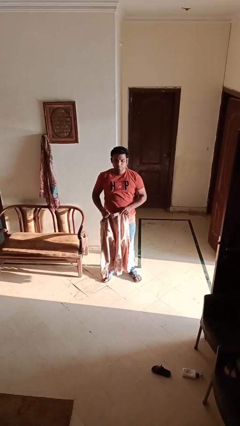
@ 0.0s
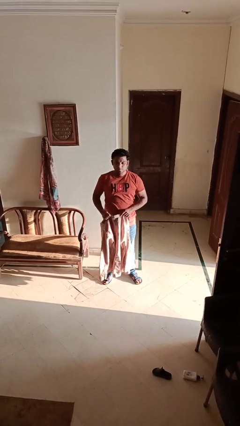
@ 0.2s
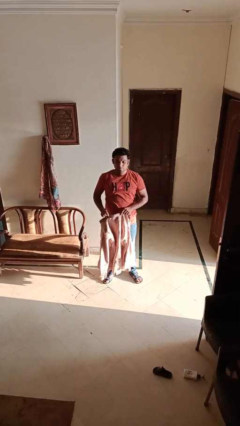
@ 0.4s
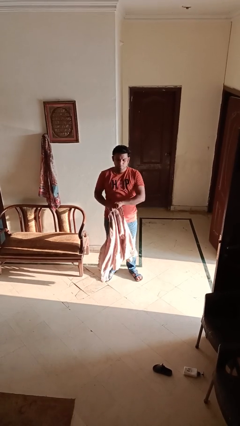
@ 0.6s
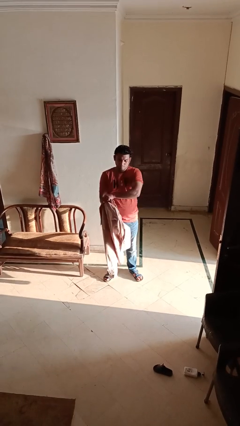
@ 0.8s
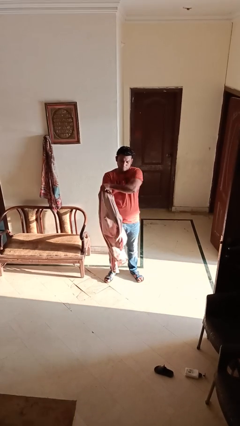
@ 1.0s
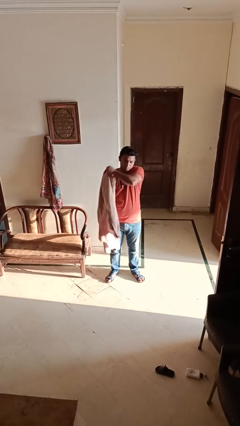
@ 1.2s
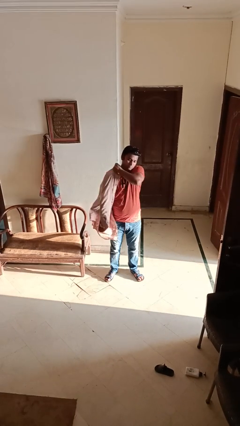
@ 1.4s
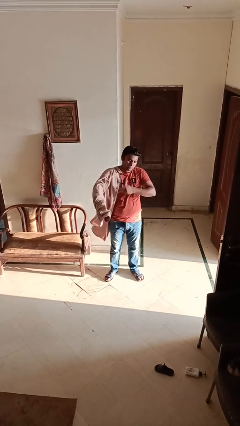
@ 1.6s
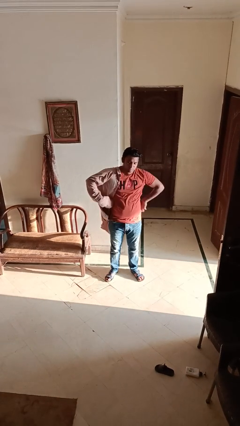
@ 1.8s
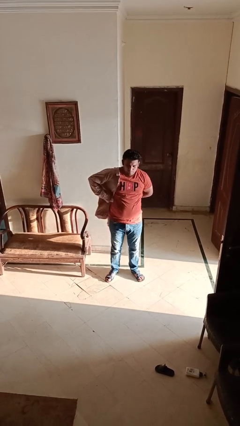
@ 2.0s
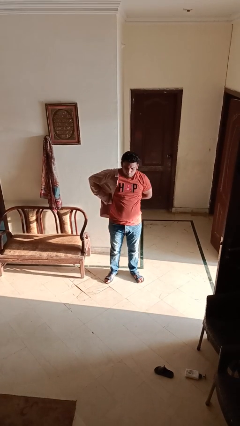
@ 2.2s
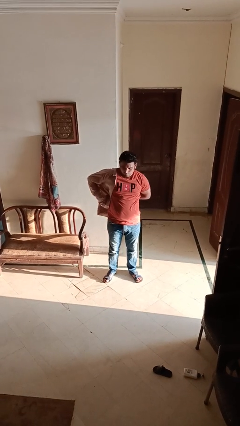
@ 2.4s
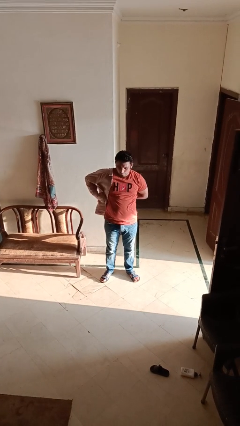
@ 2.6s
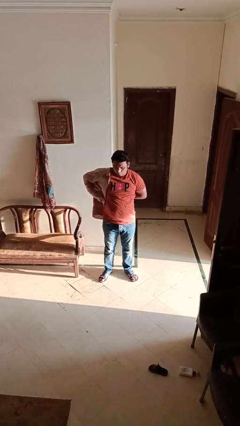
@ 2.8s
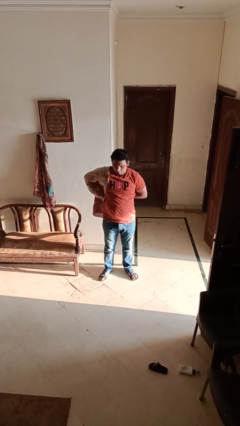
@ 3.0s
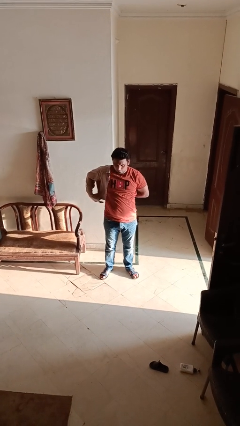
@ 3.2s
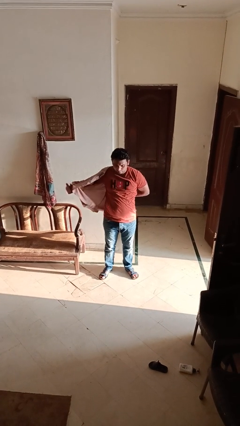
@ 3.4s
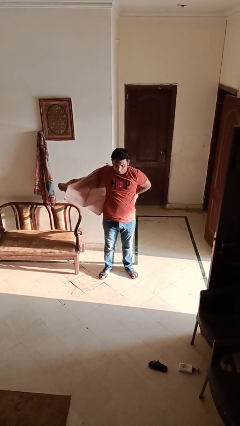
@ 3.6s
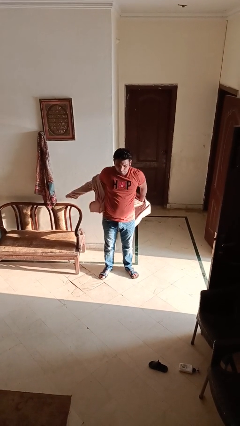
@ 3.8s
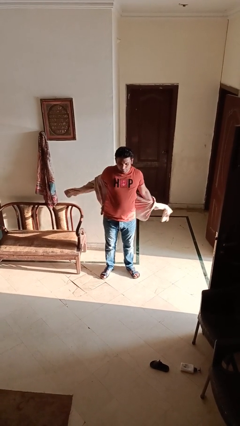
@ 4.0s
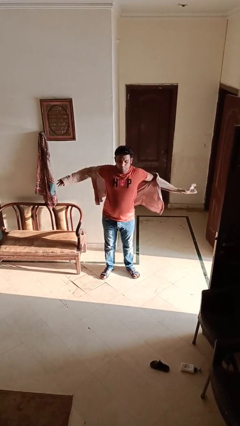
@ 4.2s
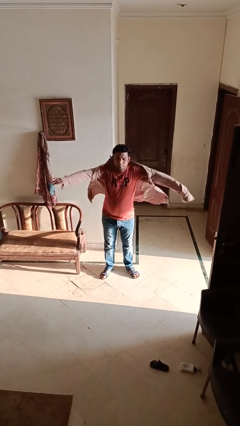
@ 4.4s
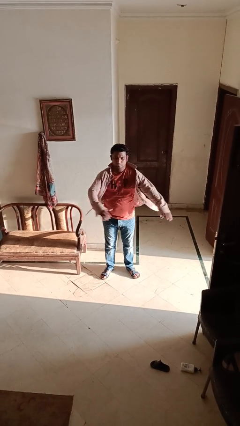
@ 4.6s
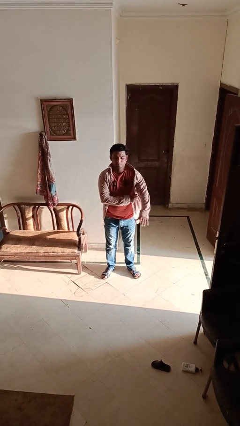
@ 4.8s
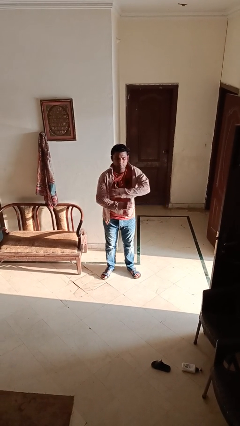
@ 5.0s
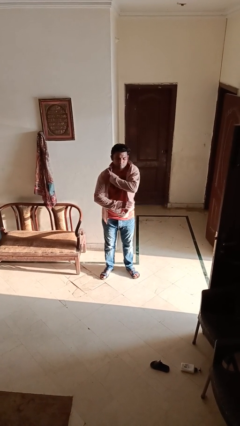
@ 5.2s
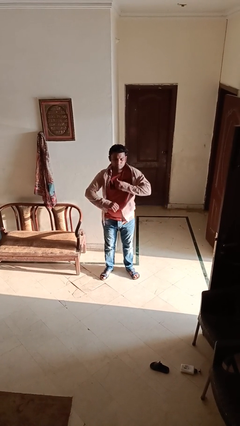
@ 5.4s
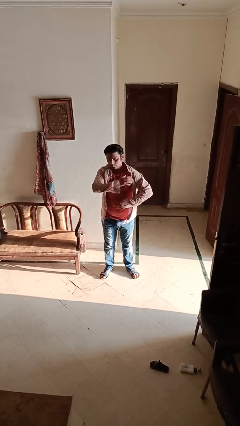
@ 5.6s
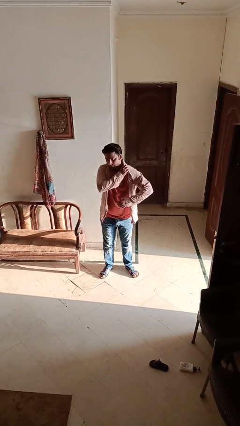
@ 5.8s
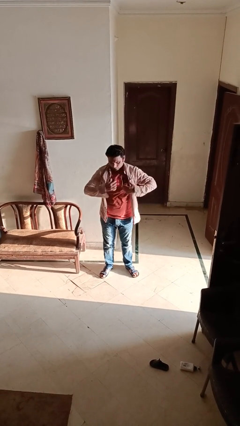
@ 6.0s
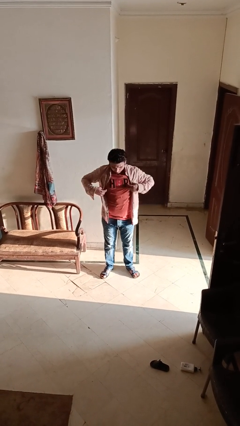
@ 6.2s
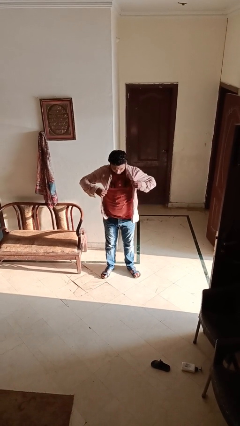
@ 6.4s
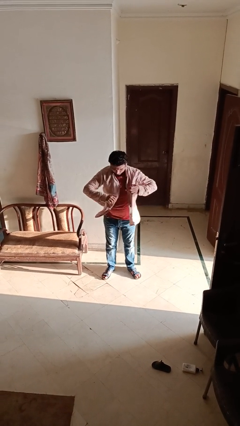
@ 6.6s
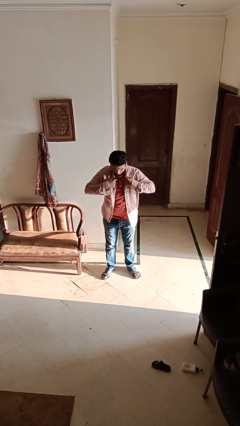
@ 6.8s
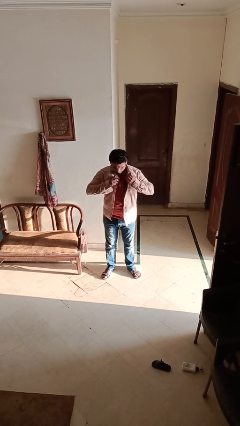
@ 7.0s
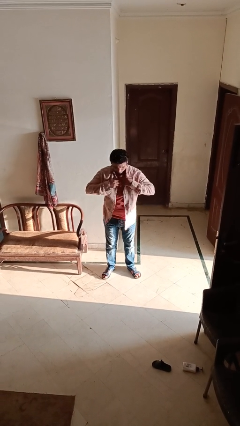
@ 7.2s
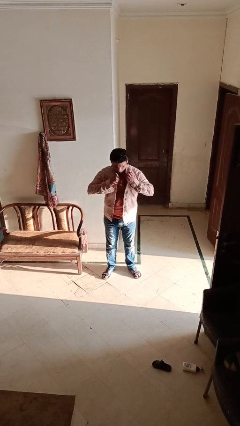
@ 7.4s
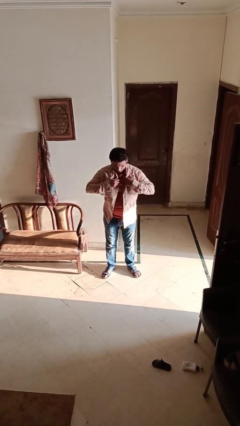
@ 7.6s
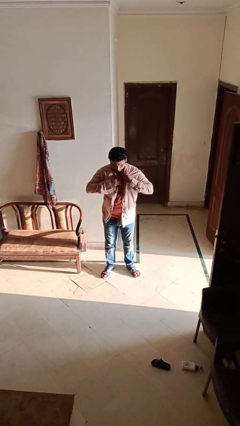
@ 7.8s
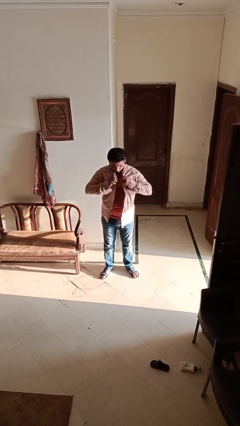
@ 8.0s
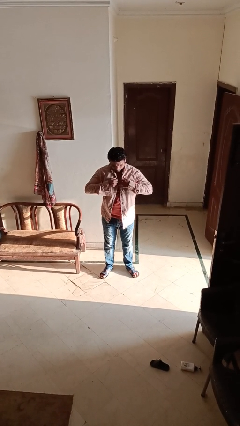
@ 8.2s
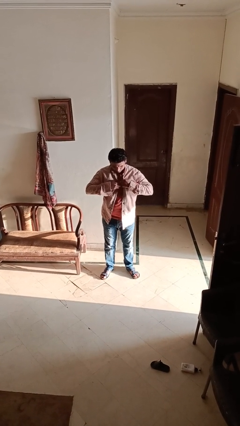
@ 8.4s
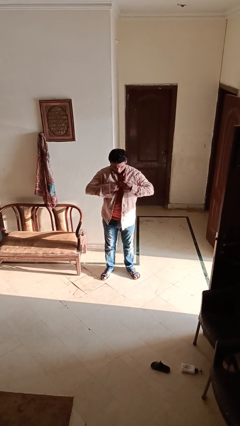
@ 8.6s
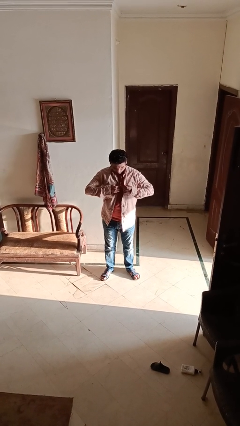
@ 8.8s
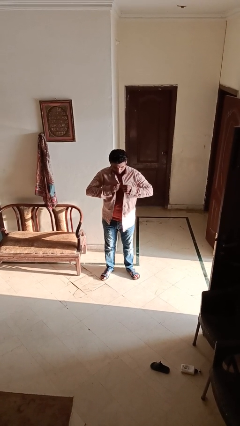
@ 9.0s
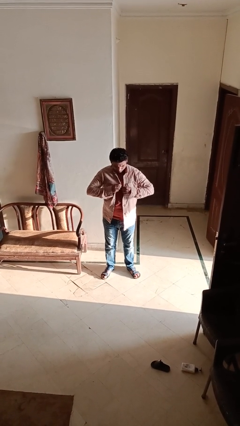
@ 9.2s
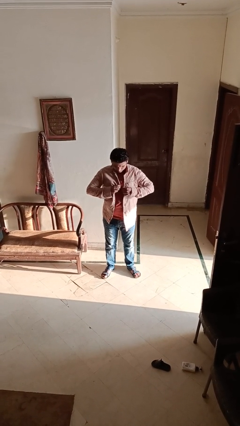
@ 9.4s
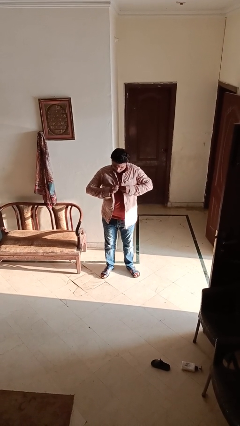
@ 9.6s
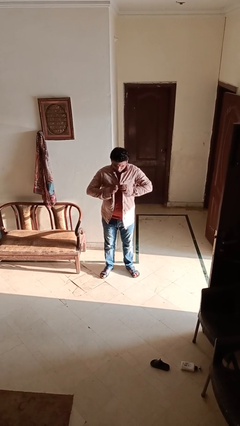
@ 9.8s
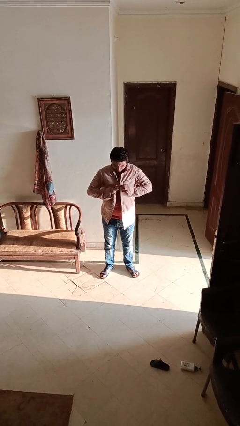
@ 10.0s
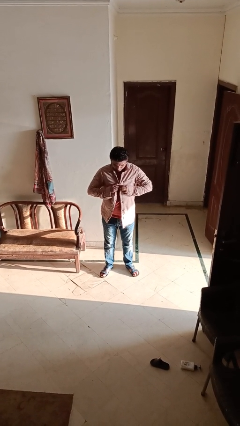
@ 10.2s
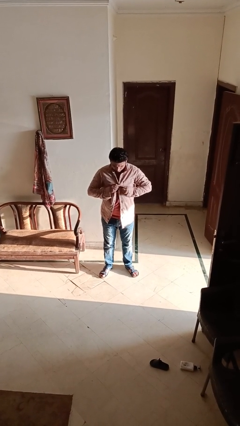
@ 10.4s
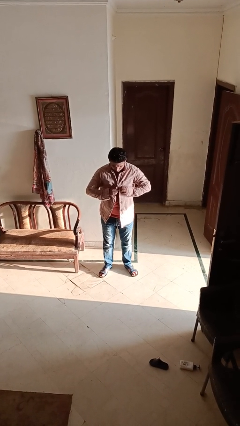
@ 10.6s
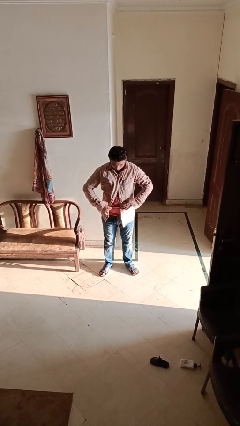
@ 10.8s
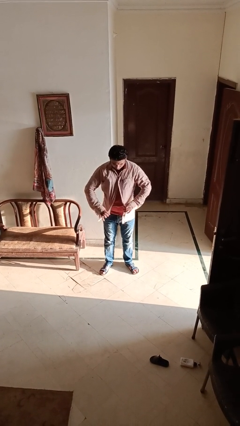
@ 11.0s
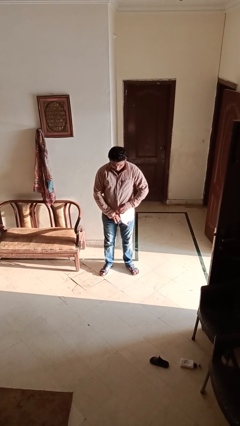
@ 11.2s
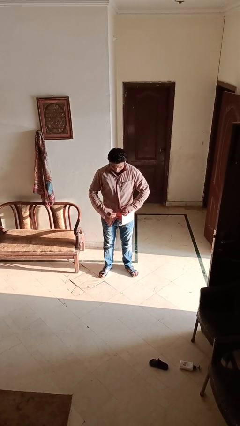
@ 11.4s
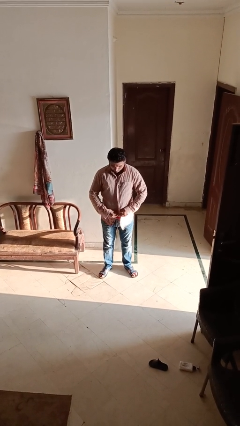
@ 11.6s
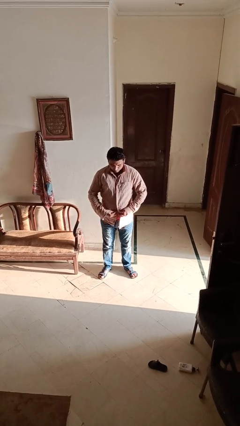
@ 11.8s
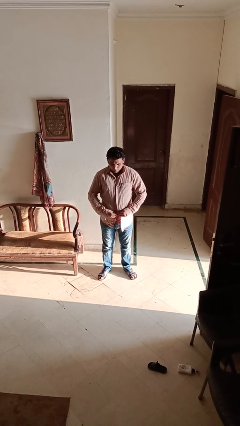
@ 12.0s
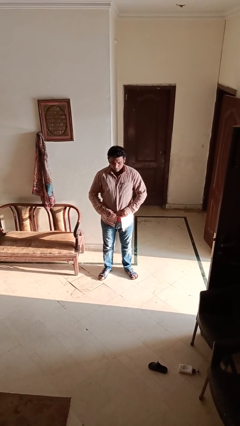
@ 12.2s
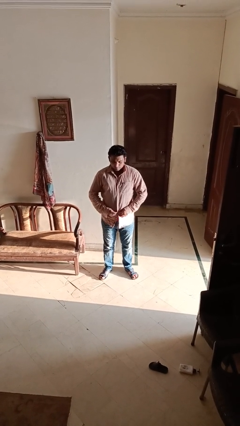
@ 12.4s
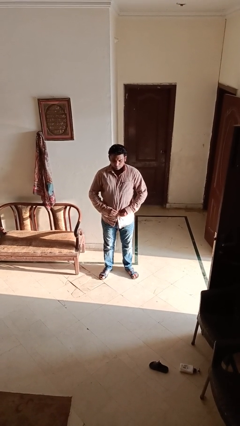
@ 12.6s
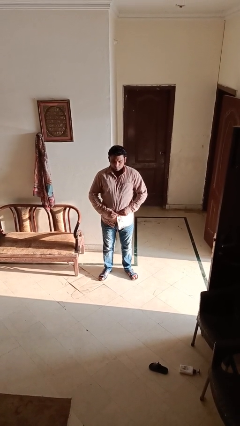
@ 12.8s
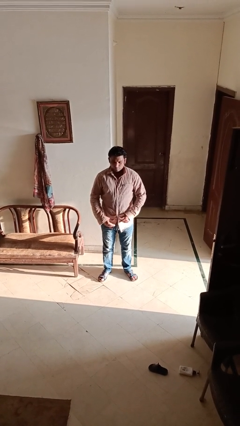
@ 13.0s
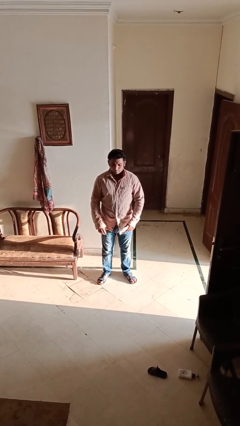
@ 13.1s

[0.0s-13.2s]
person puts on shirt

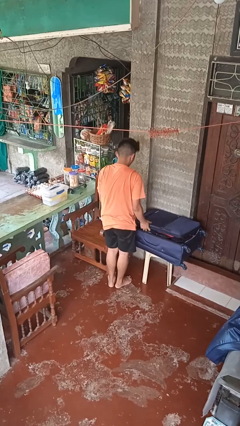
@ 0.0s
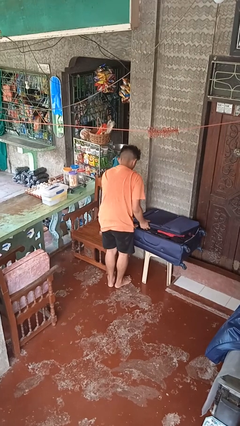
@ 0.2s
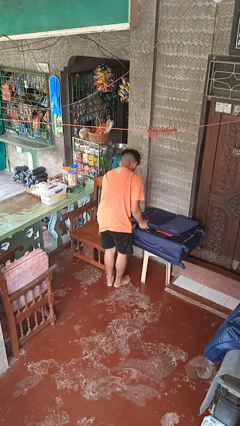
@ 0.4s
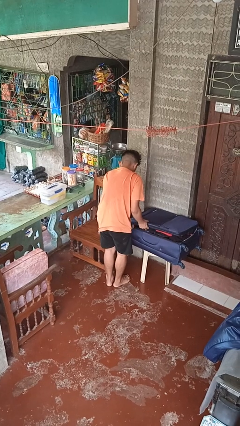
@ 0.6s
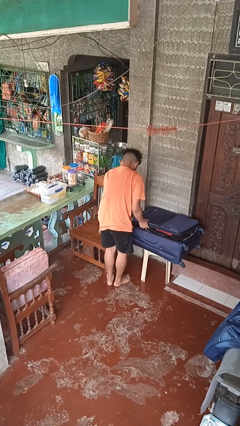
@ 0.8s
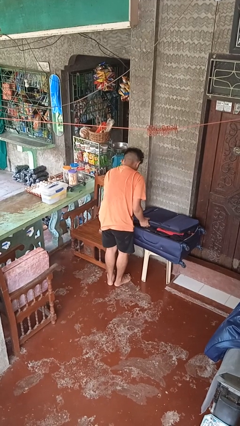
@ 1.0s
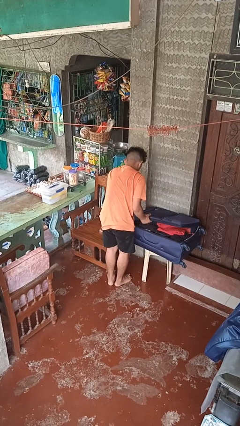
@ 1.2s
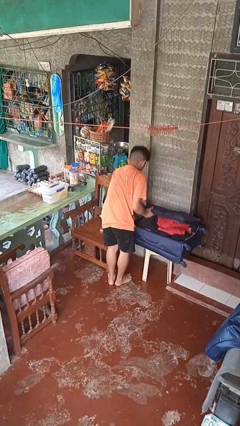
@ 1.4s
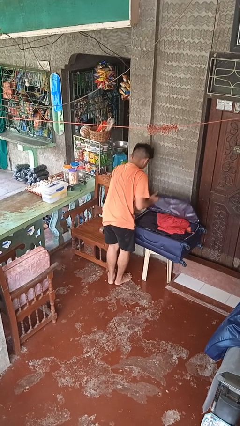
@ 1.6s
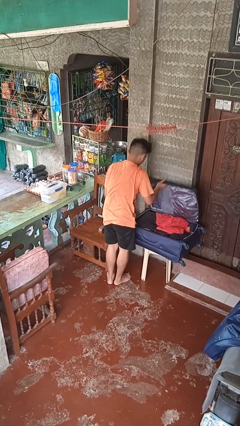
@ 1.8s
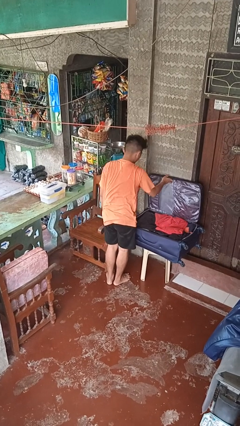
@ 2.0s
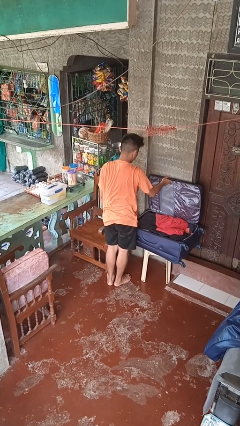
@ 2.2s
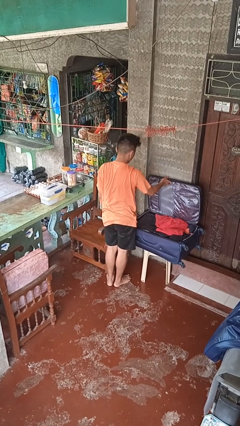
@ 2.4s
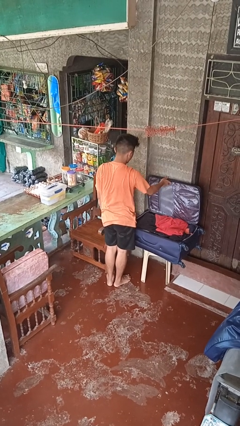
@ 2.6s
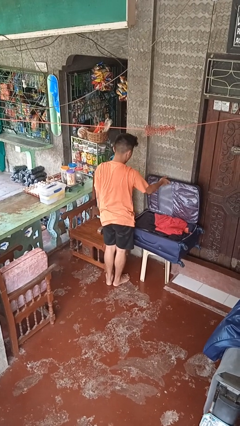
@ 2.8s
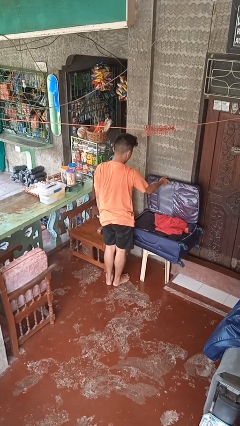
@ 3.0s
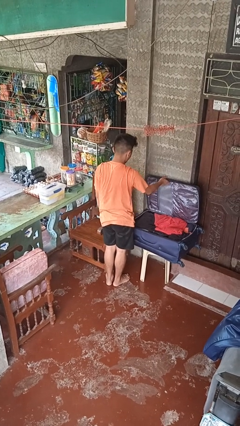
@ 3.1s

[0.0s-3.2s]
person opens suitcase

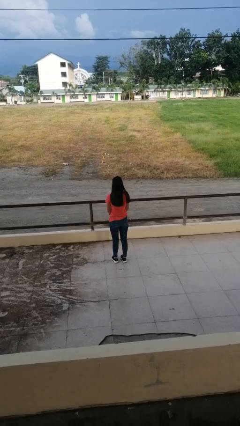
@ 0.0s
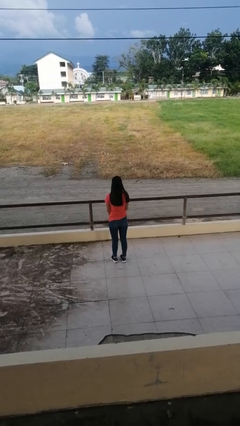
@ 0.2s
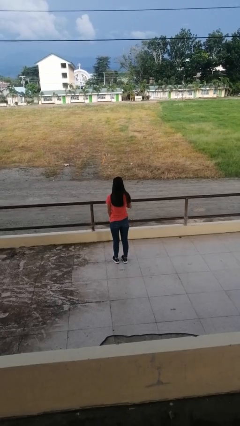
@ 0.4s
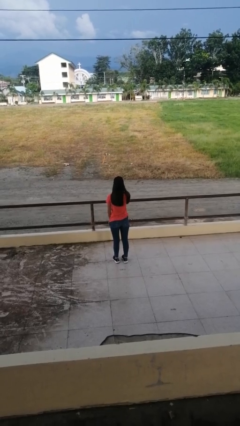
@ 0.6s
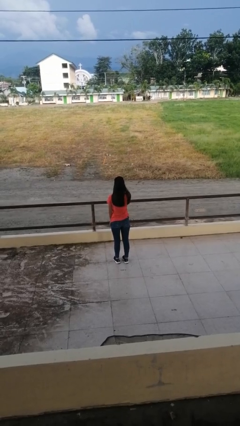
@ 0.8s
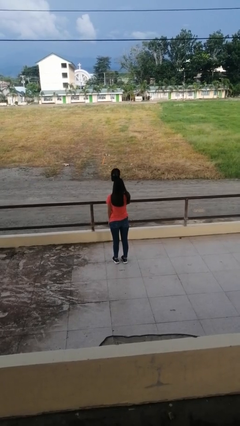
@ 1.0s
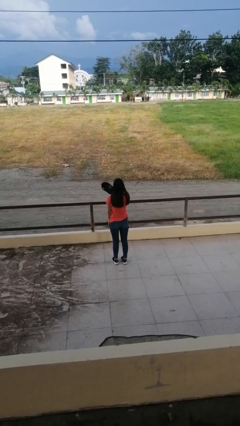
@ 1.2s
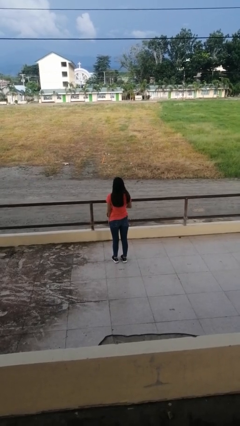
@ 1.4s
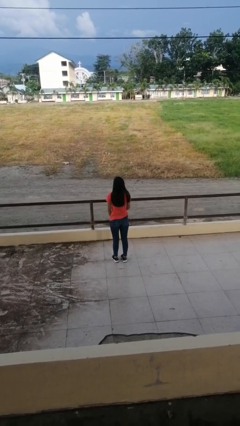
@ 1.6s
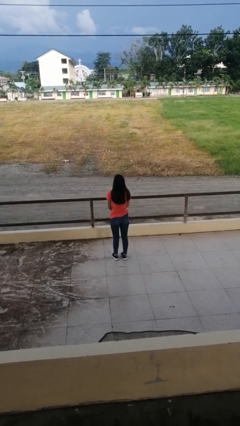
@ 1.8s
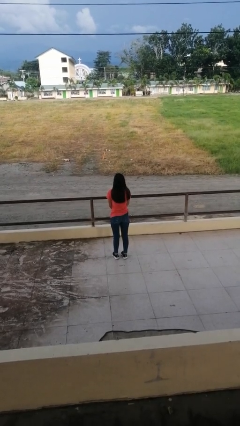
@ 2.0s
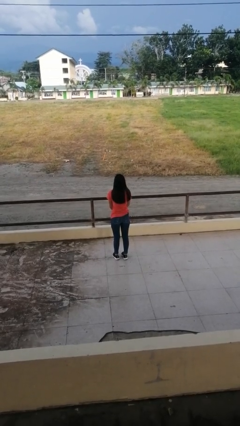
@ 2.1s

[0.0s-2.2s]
person takes off hat
